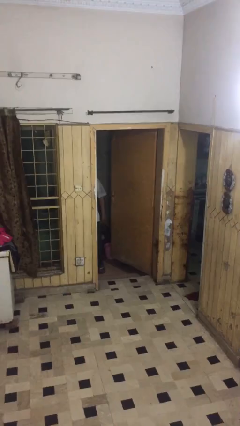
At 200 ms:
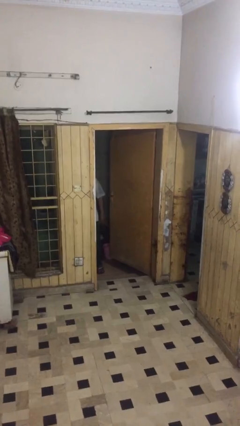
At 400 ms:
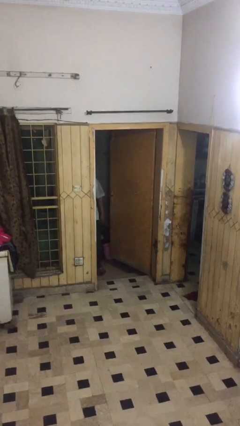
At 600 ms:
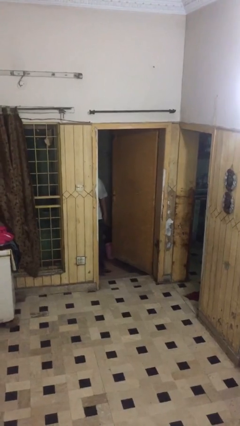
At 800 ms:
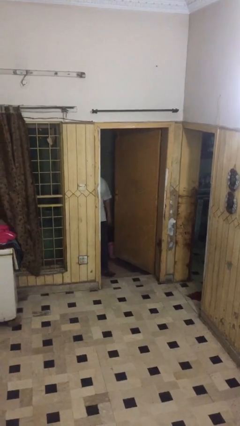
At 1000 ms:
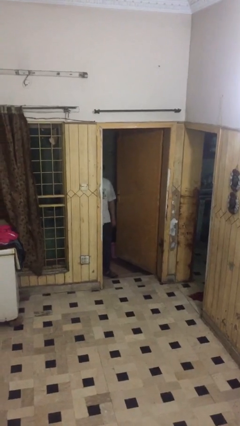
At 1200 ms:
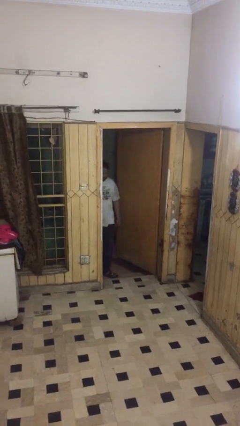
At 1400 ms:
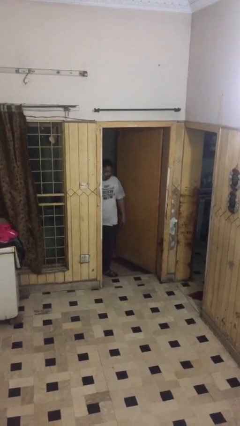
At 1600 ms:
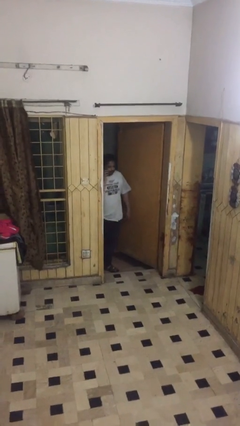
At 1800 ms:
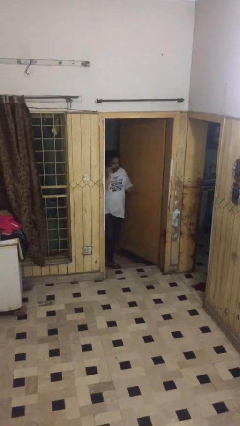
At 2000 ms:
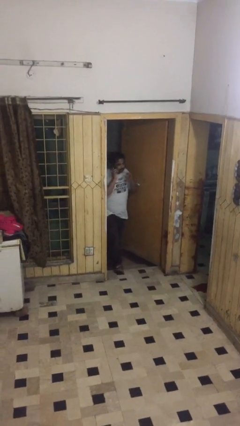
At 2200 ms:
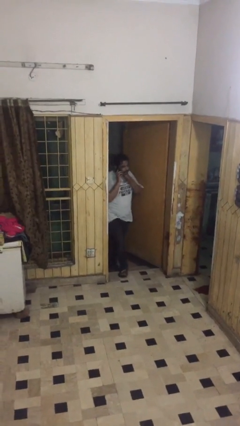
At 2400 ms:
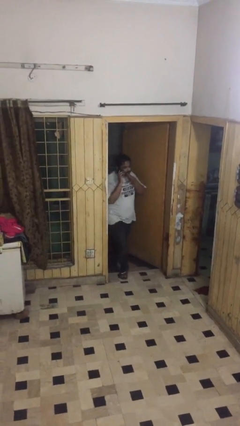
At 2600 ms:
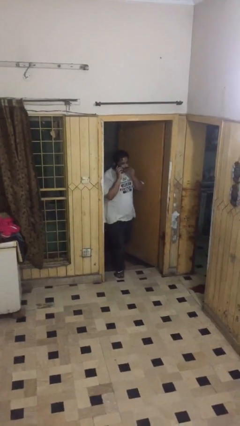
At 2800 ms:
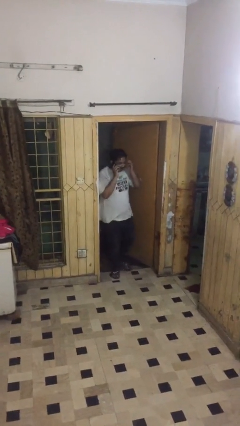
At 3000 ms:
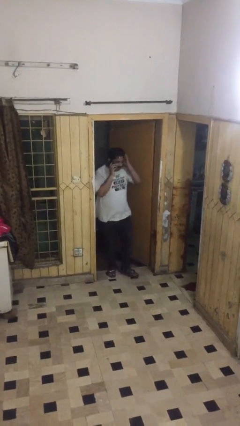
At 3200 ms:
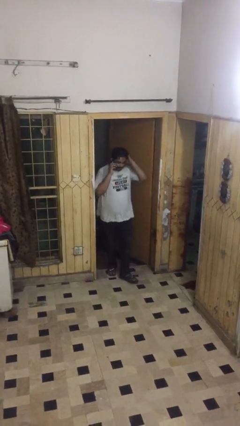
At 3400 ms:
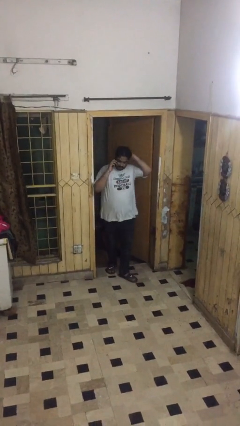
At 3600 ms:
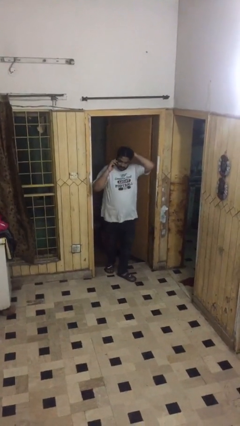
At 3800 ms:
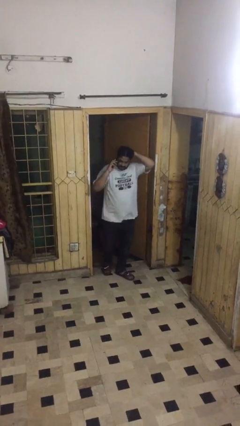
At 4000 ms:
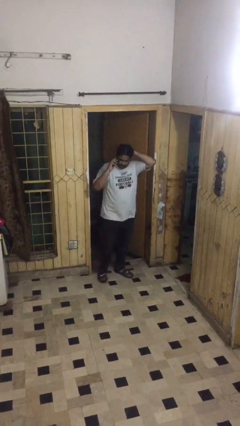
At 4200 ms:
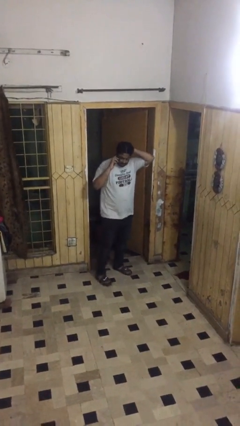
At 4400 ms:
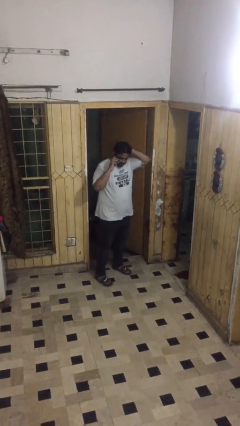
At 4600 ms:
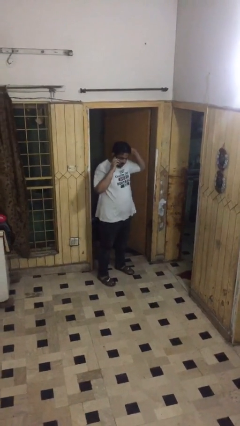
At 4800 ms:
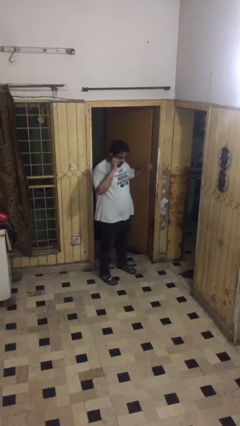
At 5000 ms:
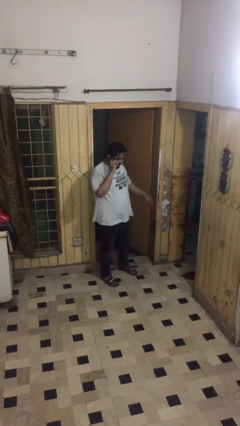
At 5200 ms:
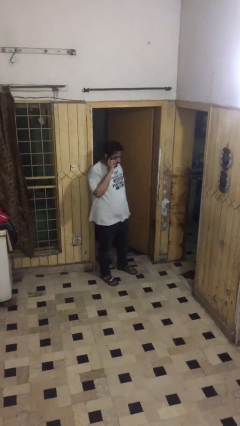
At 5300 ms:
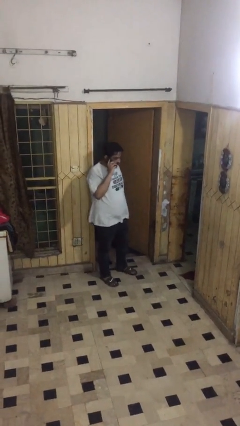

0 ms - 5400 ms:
person enters scene through structure

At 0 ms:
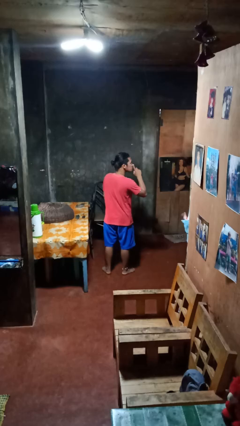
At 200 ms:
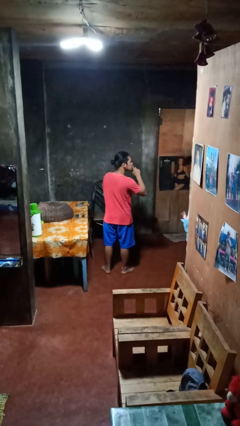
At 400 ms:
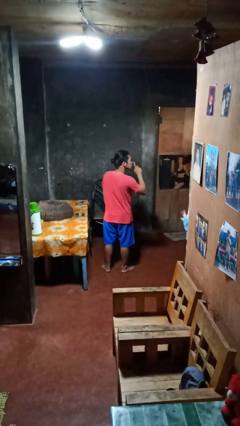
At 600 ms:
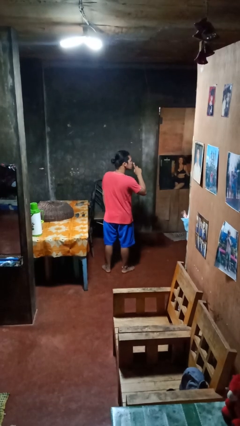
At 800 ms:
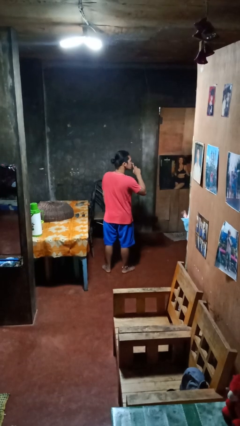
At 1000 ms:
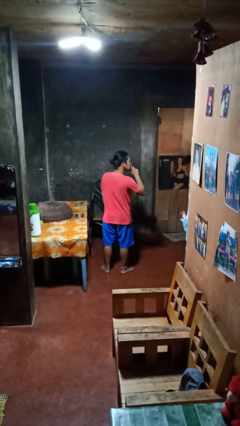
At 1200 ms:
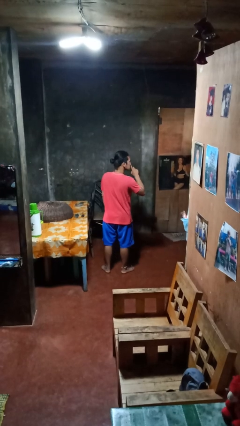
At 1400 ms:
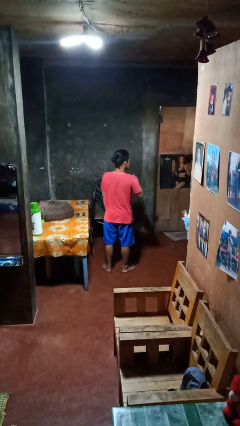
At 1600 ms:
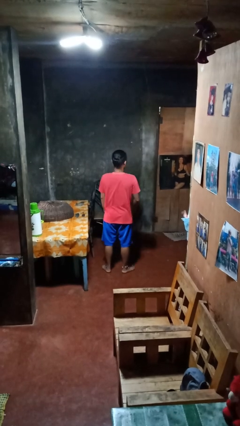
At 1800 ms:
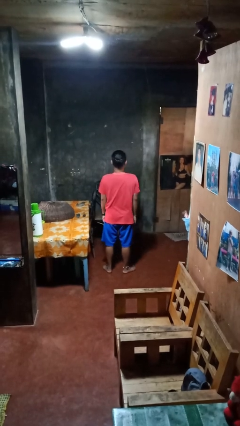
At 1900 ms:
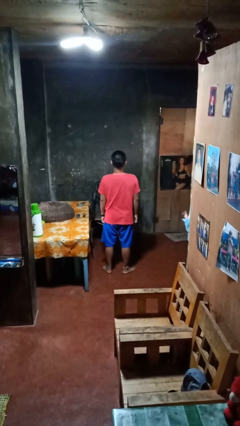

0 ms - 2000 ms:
person gestures be quiet

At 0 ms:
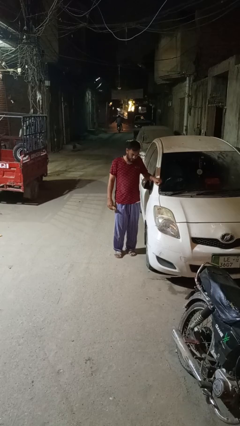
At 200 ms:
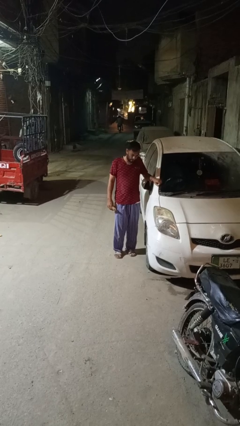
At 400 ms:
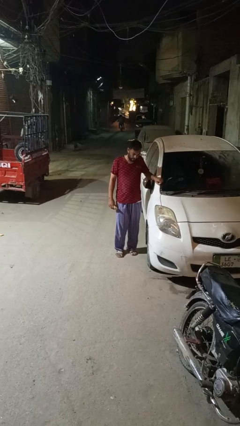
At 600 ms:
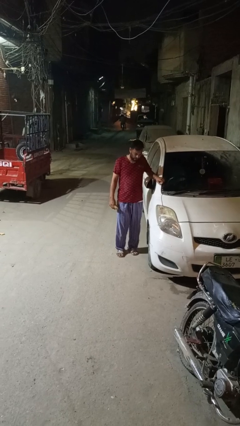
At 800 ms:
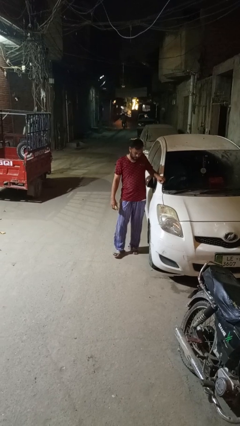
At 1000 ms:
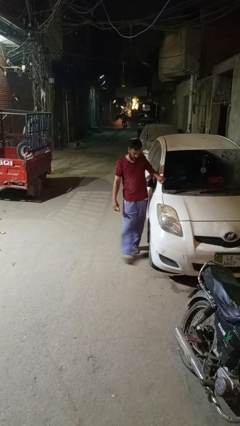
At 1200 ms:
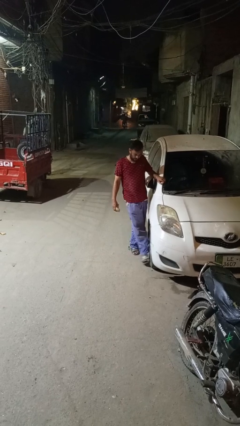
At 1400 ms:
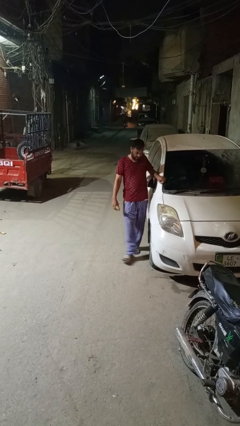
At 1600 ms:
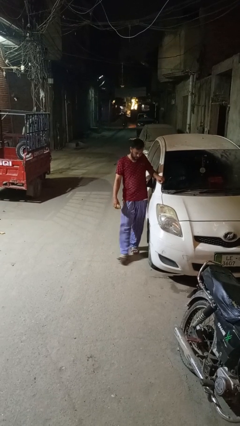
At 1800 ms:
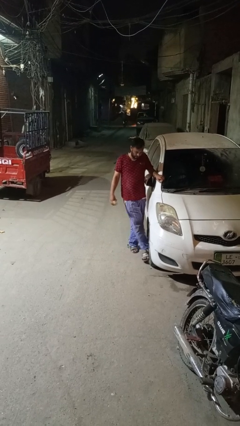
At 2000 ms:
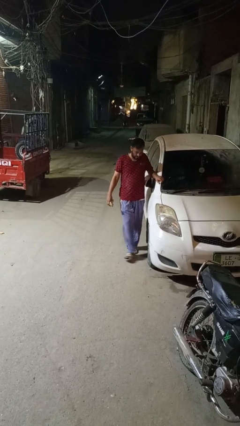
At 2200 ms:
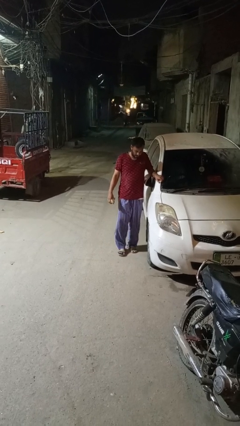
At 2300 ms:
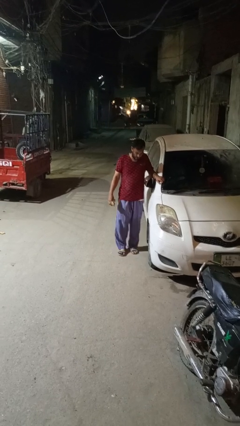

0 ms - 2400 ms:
person kicks car tires

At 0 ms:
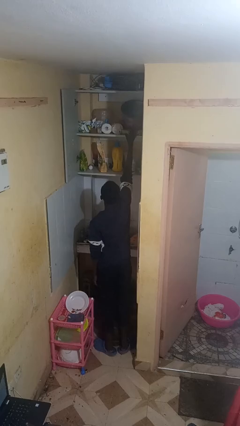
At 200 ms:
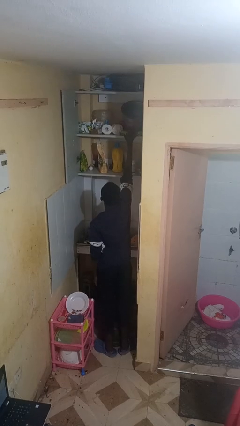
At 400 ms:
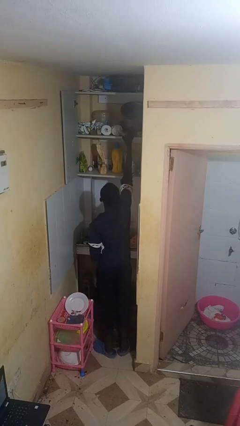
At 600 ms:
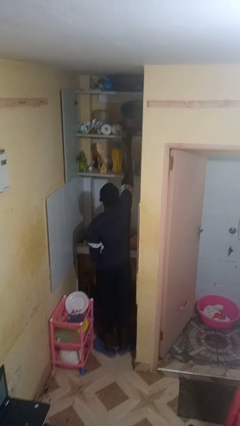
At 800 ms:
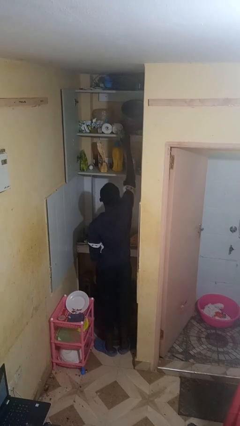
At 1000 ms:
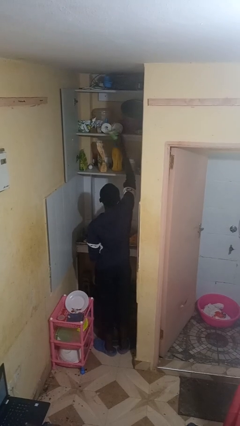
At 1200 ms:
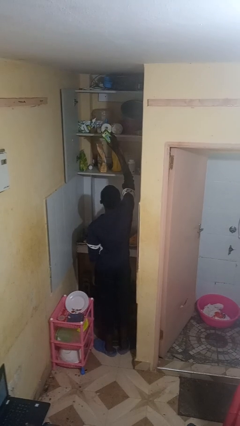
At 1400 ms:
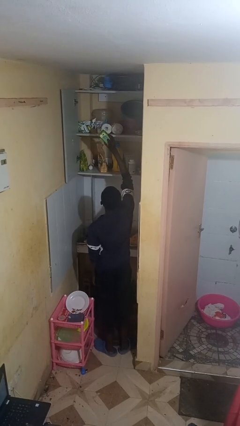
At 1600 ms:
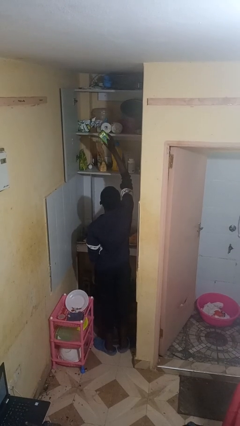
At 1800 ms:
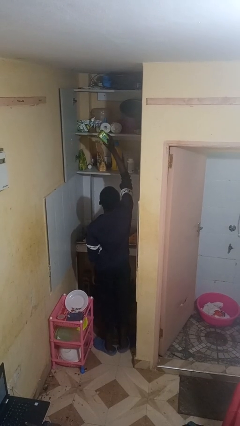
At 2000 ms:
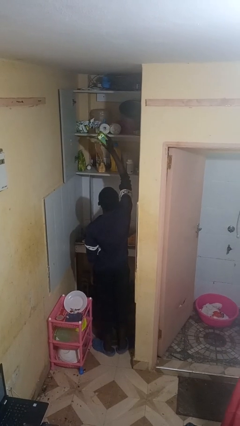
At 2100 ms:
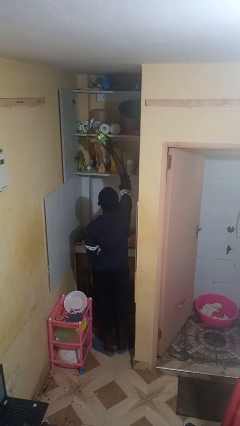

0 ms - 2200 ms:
person takes object from cabinet

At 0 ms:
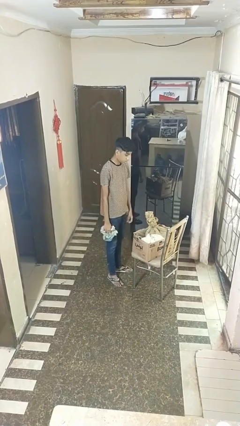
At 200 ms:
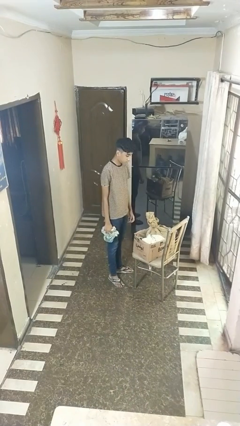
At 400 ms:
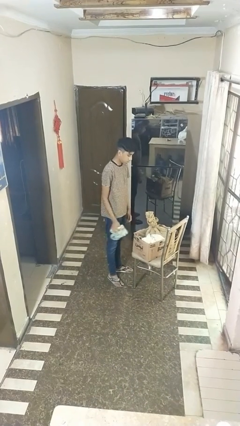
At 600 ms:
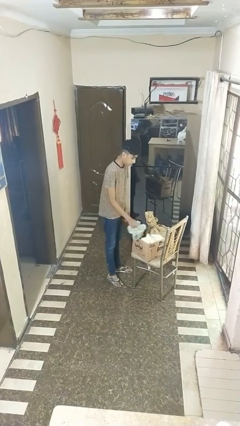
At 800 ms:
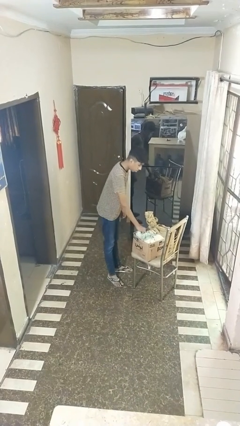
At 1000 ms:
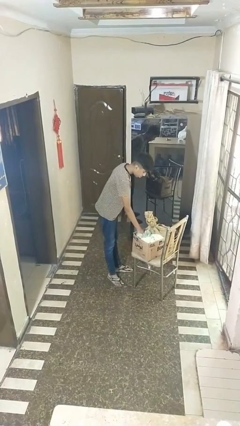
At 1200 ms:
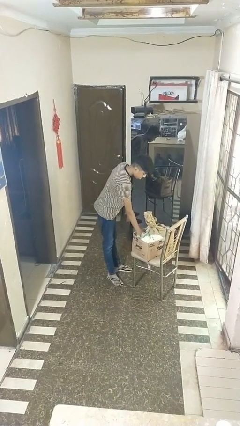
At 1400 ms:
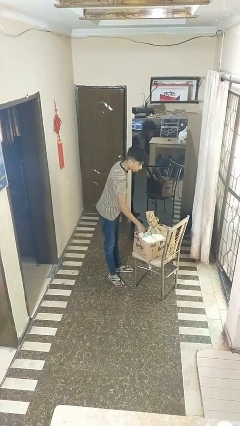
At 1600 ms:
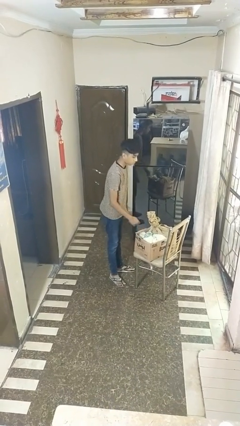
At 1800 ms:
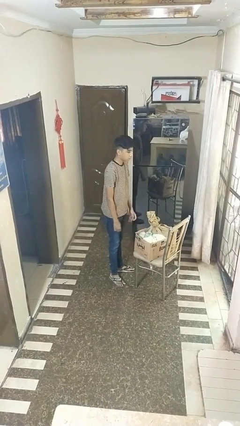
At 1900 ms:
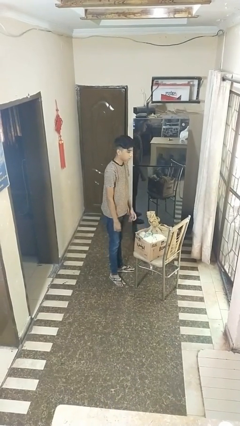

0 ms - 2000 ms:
person puts object into box

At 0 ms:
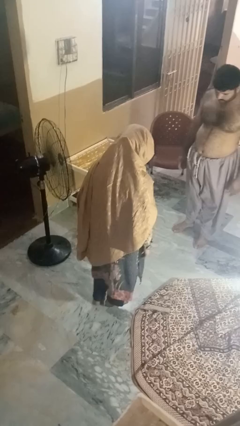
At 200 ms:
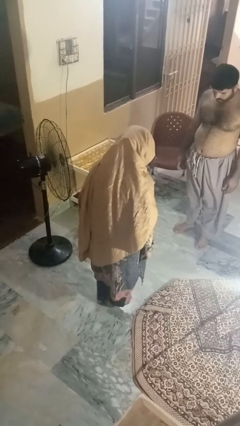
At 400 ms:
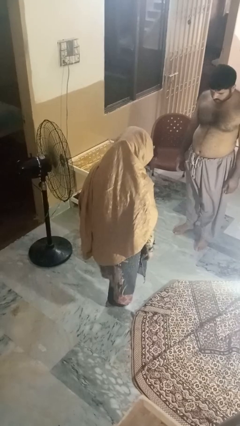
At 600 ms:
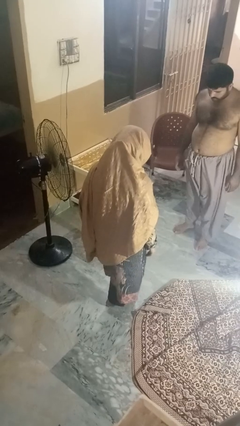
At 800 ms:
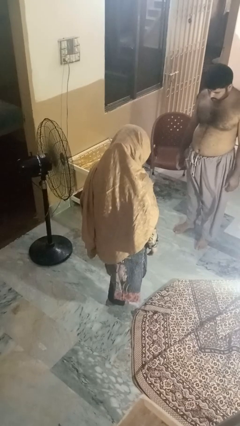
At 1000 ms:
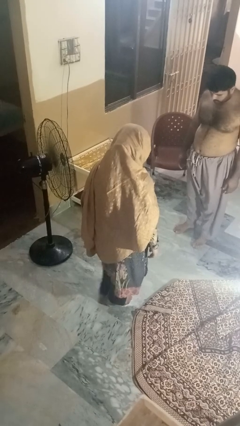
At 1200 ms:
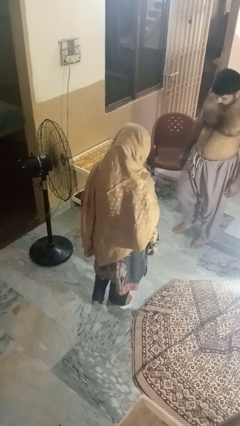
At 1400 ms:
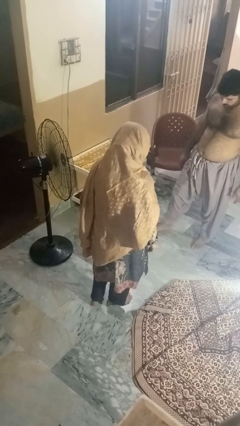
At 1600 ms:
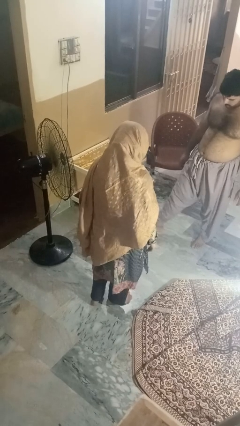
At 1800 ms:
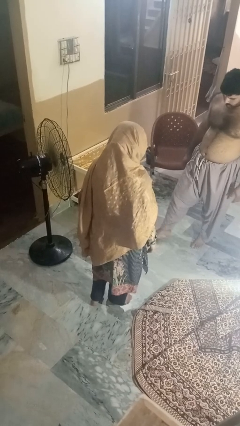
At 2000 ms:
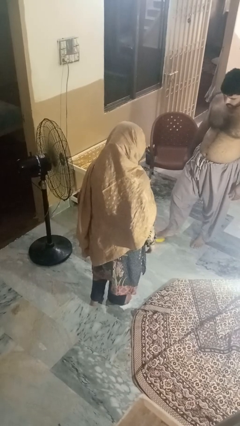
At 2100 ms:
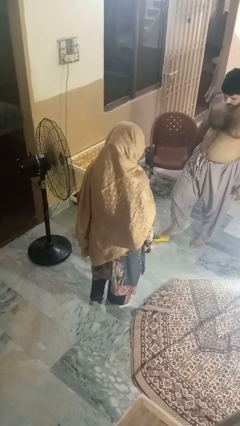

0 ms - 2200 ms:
person kicks object to person

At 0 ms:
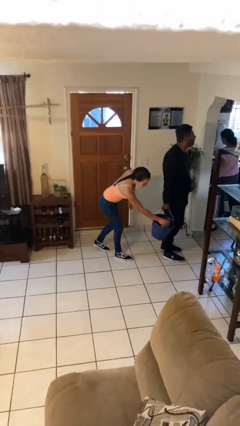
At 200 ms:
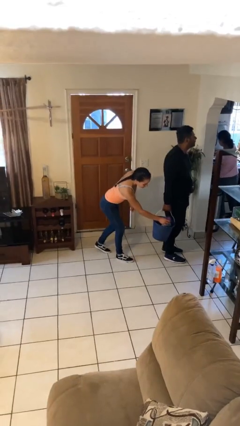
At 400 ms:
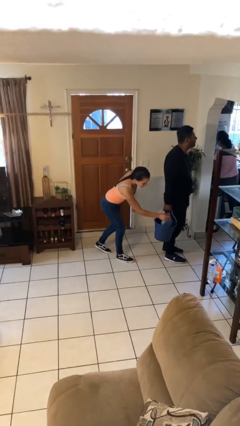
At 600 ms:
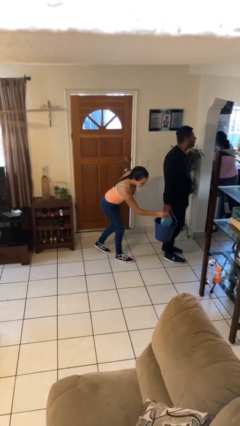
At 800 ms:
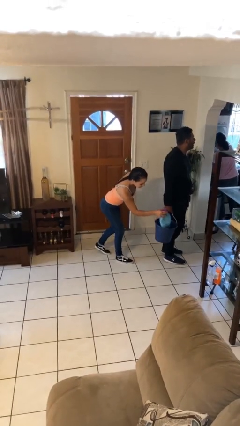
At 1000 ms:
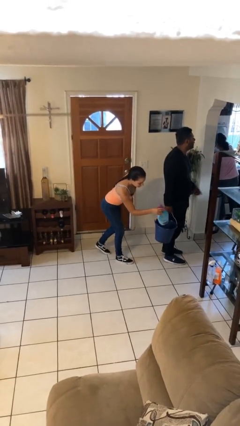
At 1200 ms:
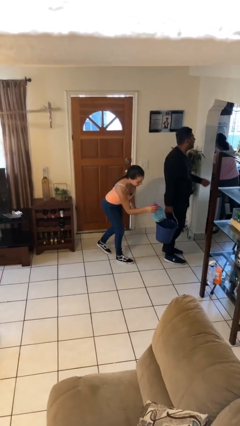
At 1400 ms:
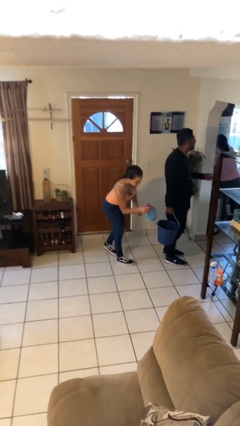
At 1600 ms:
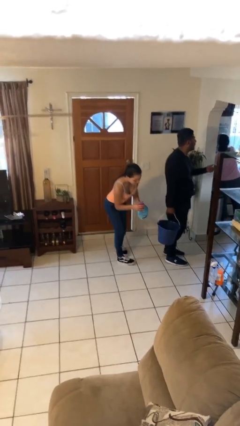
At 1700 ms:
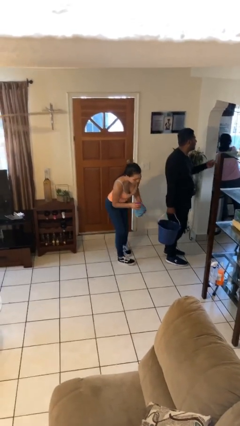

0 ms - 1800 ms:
person steals object from person
